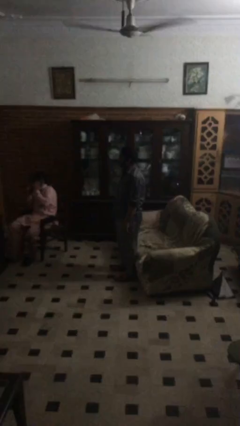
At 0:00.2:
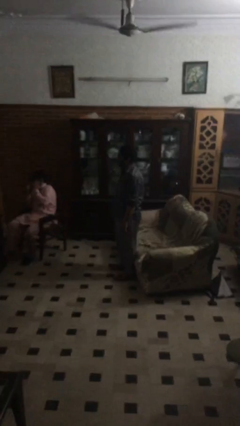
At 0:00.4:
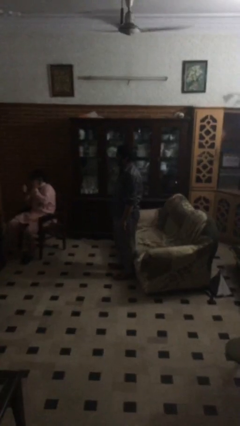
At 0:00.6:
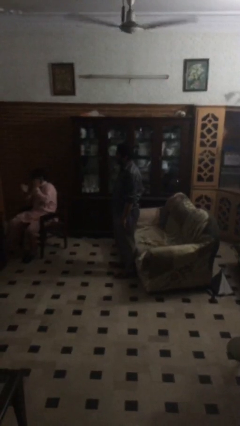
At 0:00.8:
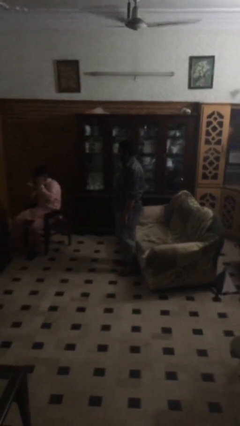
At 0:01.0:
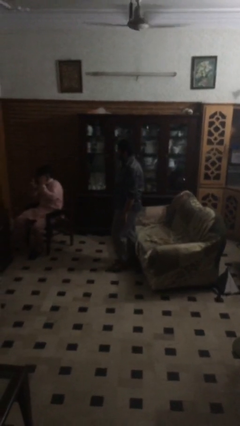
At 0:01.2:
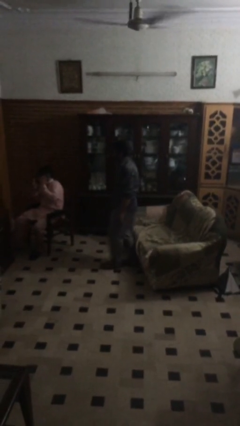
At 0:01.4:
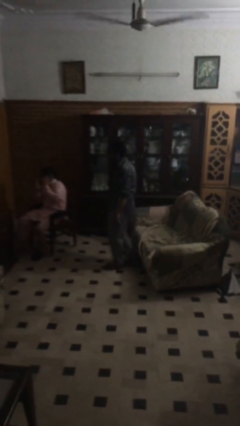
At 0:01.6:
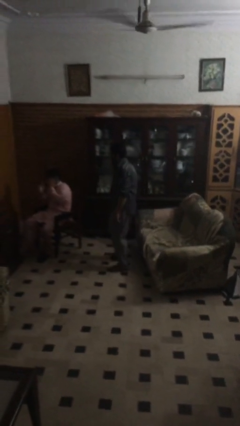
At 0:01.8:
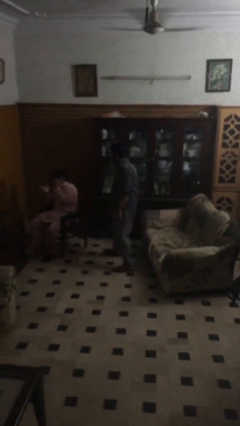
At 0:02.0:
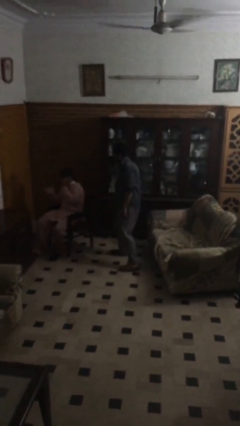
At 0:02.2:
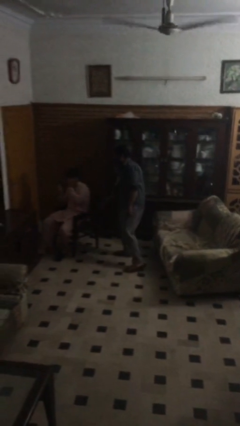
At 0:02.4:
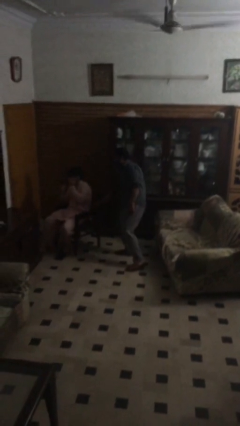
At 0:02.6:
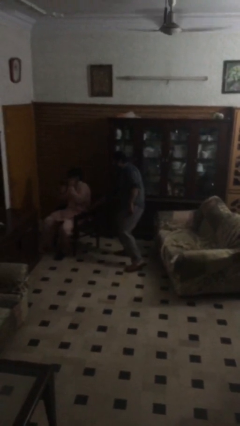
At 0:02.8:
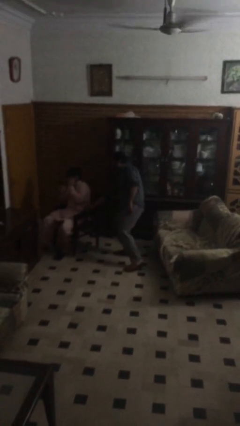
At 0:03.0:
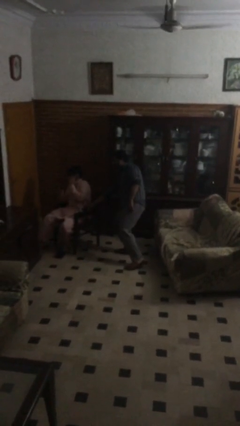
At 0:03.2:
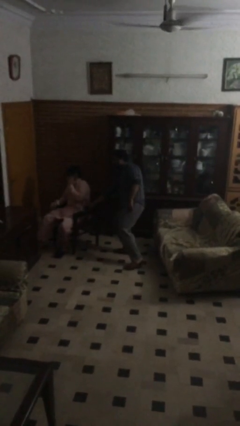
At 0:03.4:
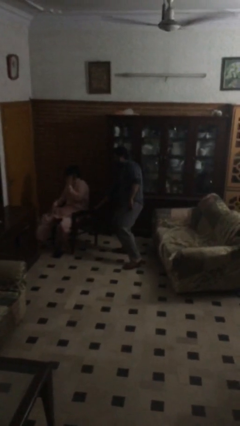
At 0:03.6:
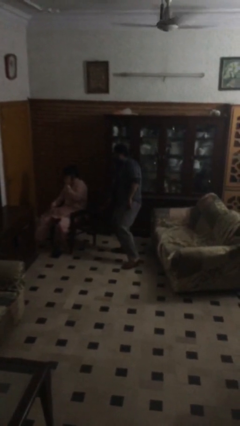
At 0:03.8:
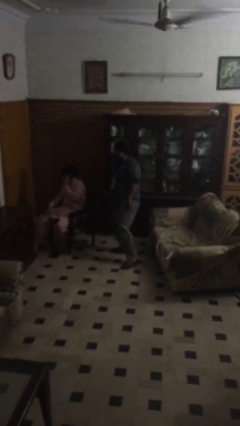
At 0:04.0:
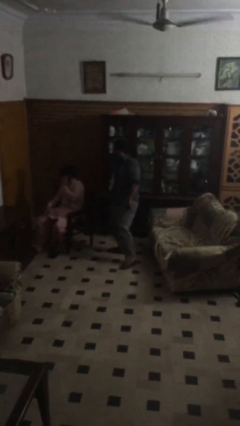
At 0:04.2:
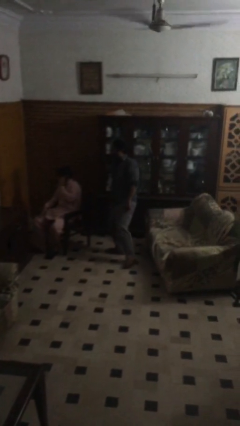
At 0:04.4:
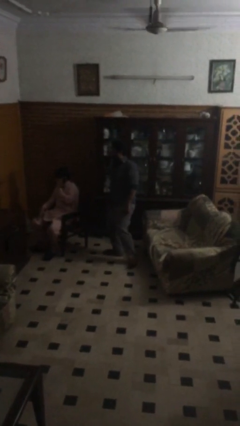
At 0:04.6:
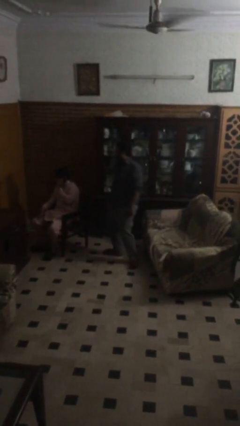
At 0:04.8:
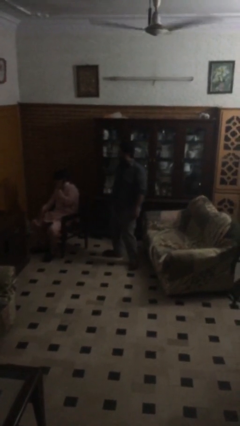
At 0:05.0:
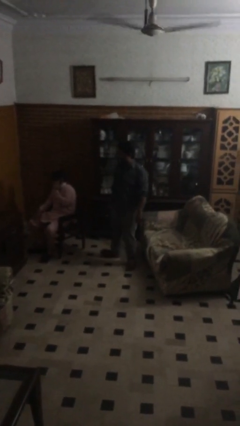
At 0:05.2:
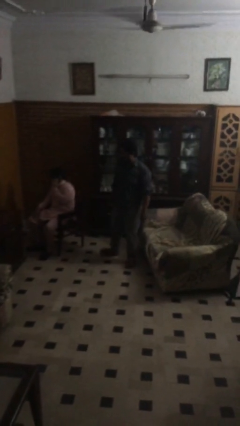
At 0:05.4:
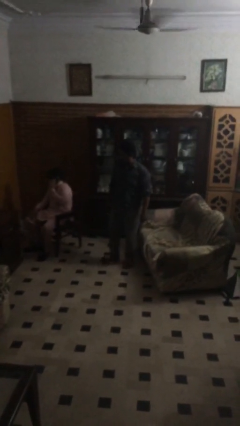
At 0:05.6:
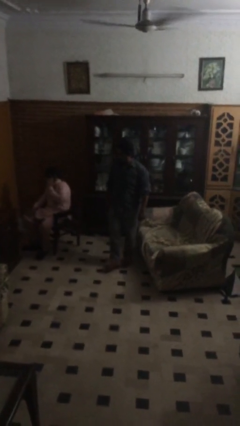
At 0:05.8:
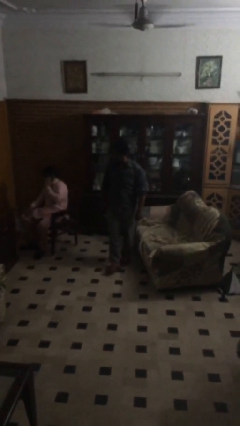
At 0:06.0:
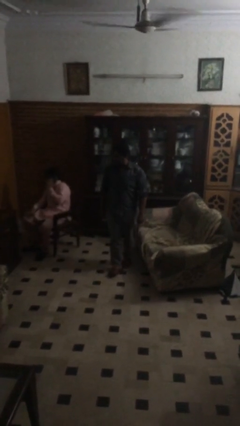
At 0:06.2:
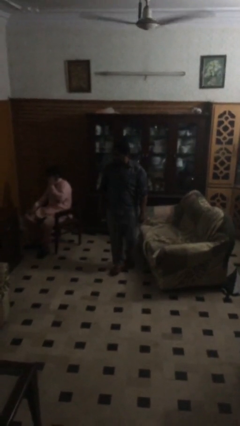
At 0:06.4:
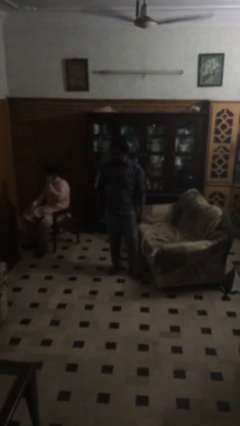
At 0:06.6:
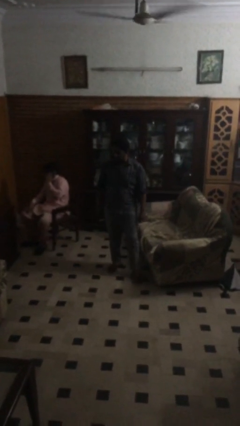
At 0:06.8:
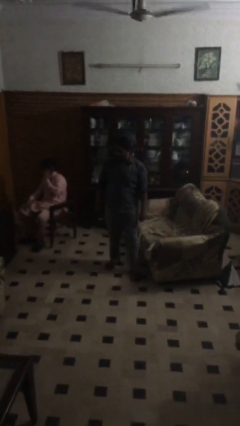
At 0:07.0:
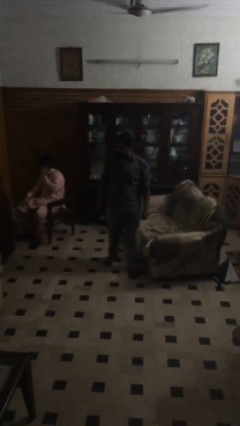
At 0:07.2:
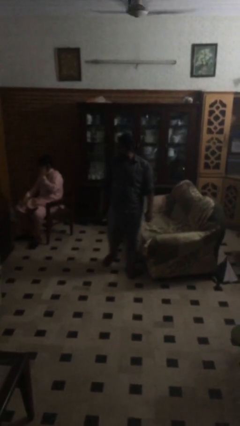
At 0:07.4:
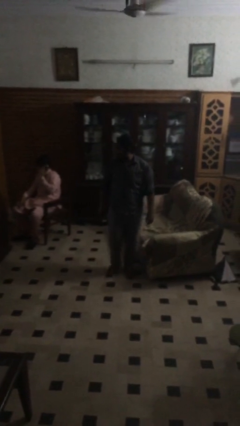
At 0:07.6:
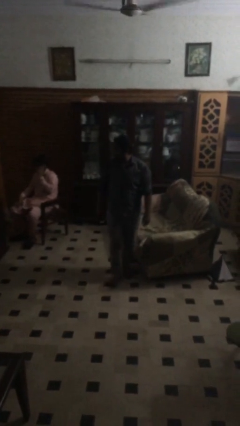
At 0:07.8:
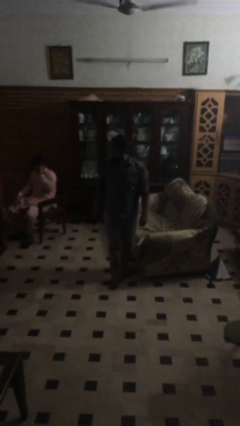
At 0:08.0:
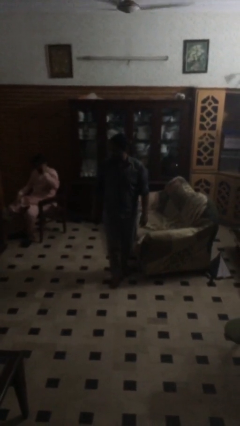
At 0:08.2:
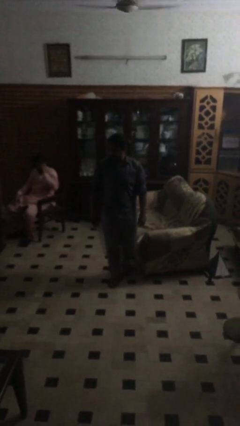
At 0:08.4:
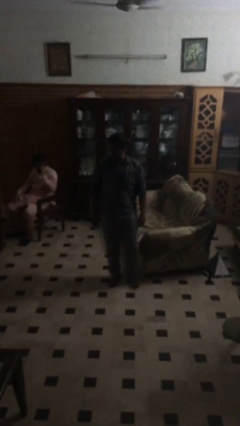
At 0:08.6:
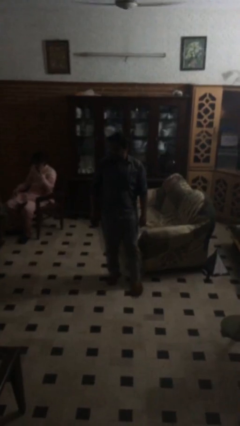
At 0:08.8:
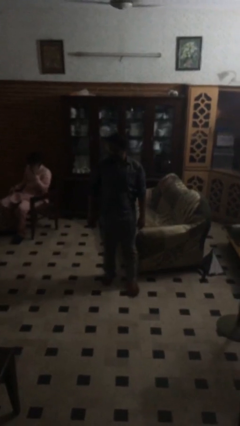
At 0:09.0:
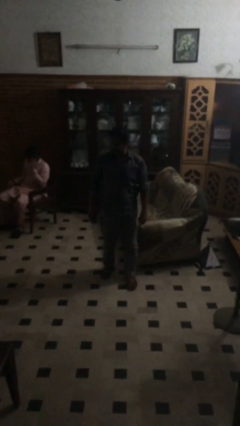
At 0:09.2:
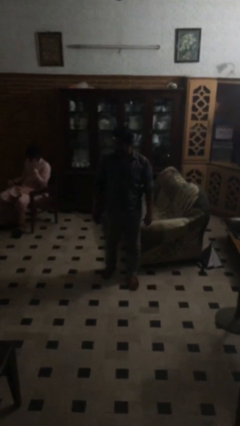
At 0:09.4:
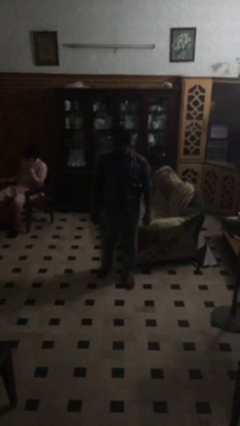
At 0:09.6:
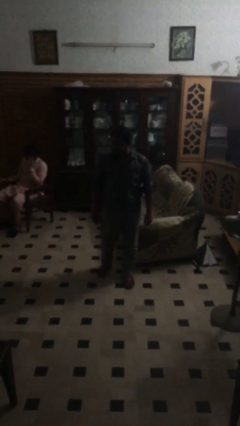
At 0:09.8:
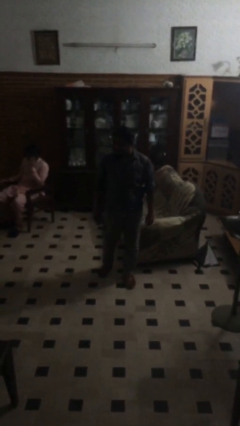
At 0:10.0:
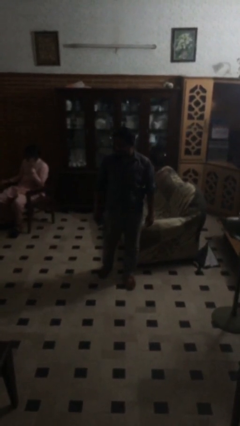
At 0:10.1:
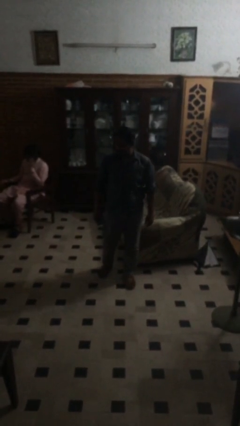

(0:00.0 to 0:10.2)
person steals object from person

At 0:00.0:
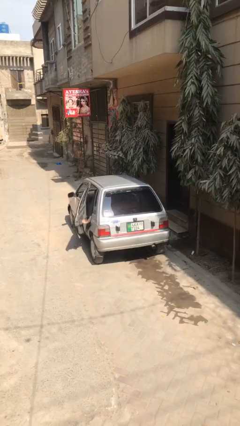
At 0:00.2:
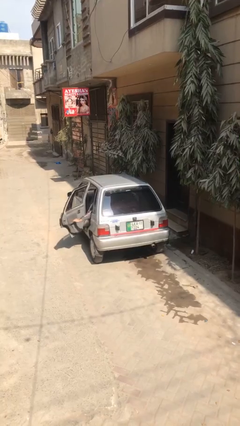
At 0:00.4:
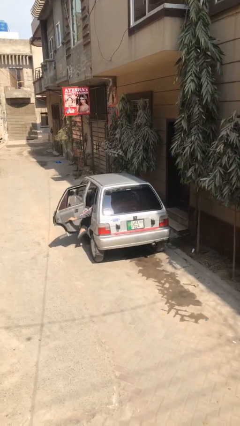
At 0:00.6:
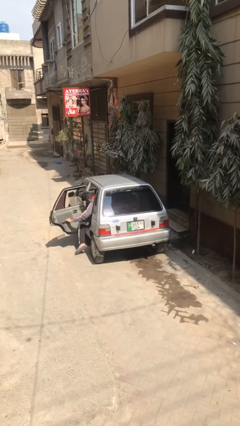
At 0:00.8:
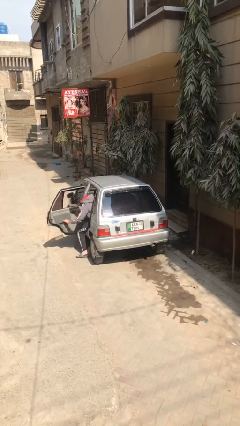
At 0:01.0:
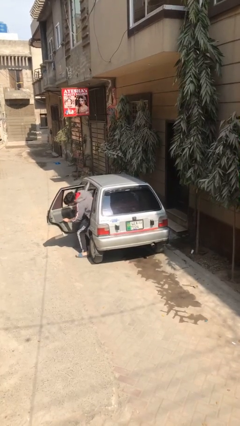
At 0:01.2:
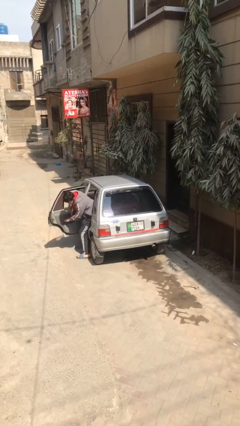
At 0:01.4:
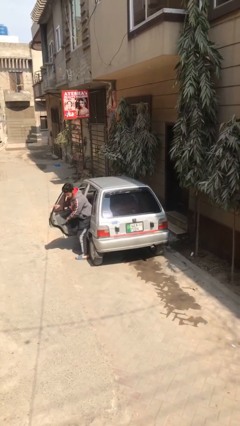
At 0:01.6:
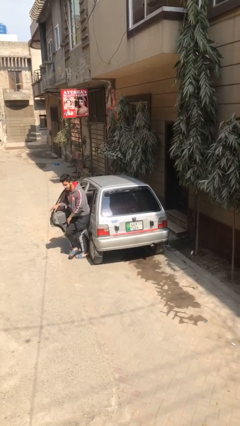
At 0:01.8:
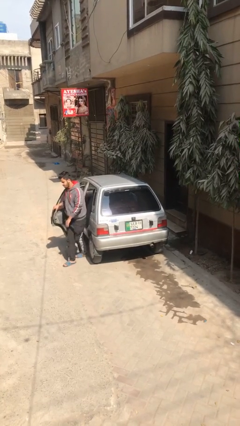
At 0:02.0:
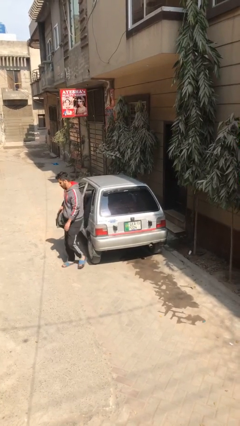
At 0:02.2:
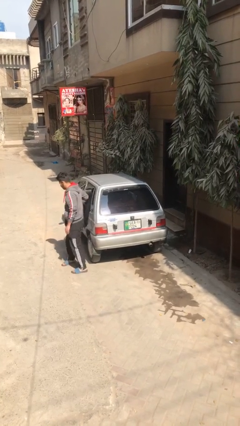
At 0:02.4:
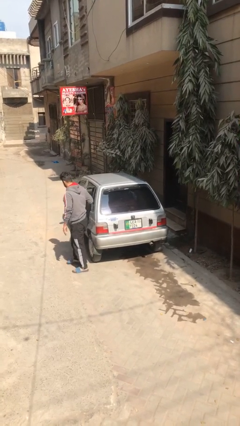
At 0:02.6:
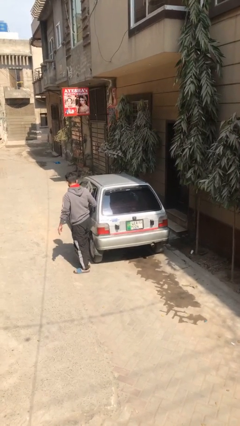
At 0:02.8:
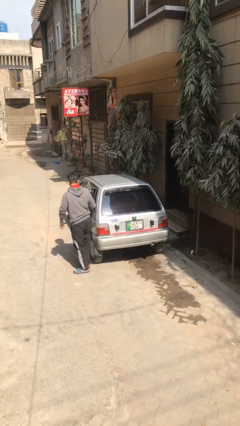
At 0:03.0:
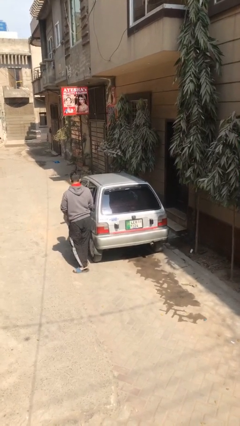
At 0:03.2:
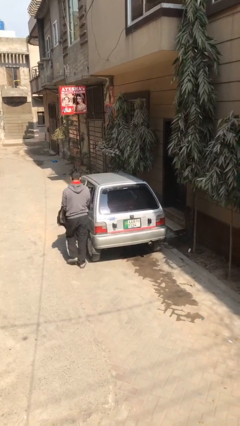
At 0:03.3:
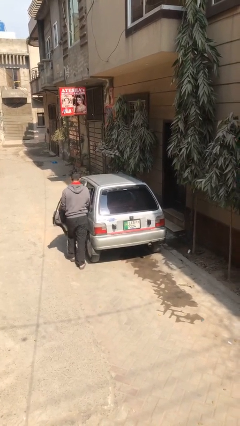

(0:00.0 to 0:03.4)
car drops off person

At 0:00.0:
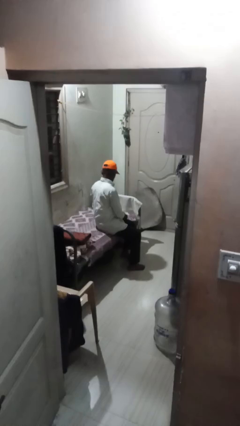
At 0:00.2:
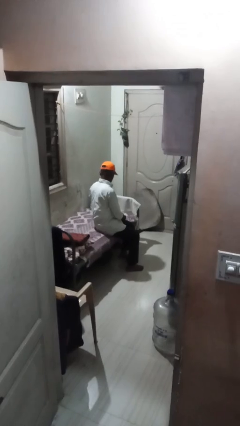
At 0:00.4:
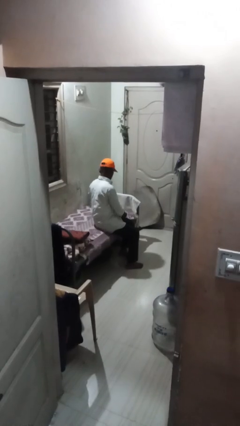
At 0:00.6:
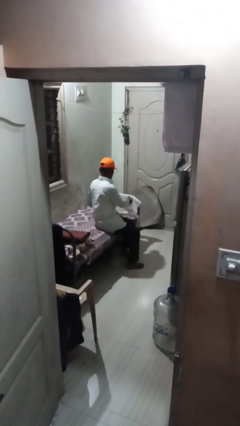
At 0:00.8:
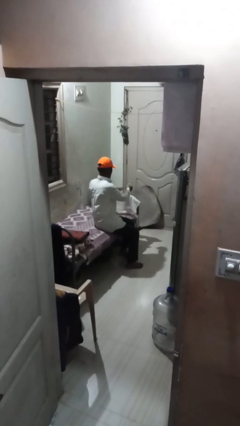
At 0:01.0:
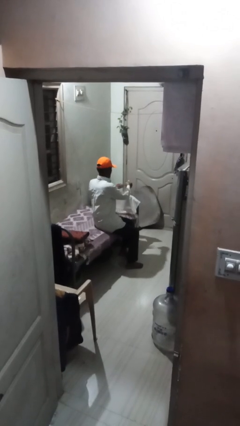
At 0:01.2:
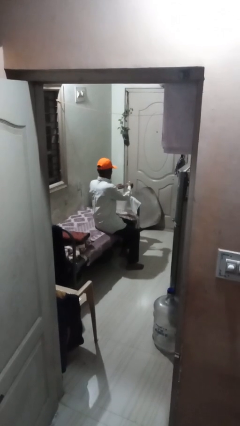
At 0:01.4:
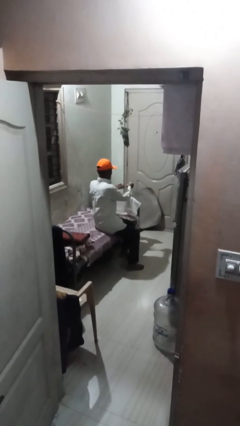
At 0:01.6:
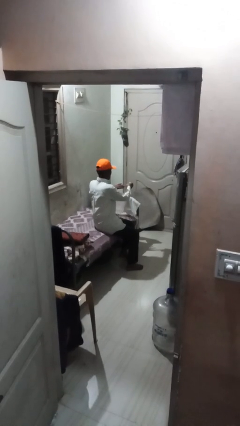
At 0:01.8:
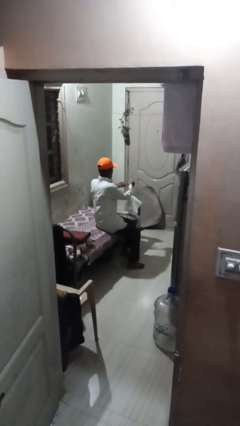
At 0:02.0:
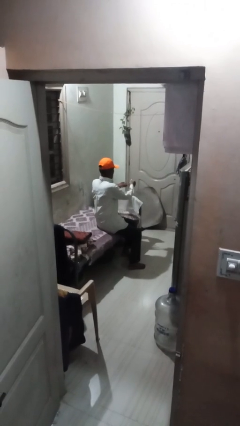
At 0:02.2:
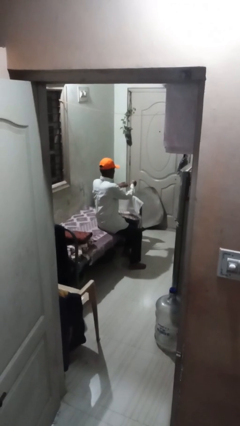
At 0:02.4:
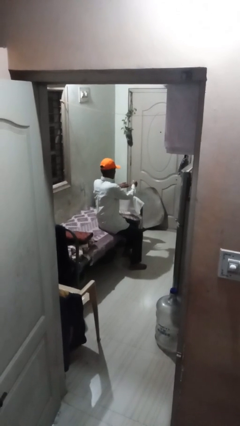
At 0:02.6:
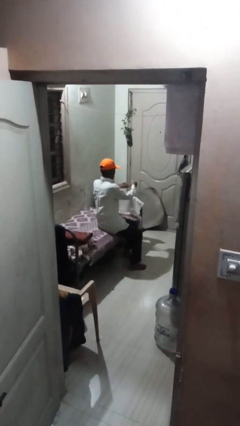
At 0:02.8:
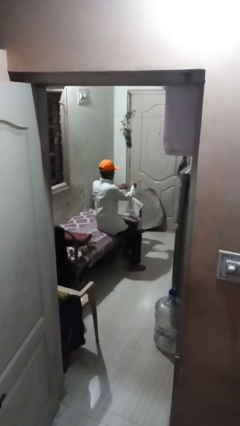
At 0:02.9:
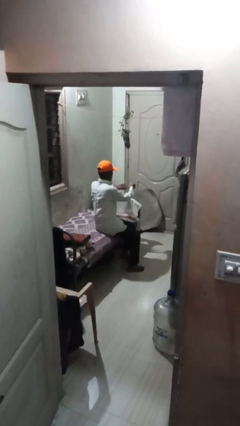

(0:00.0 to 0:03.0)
person clips fingernails

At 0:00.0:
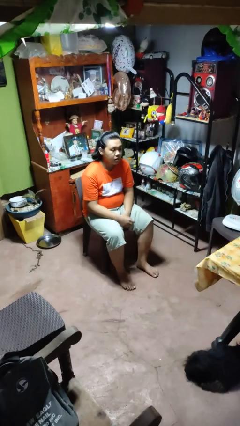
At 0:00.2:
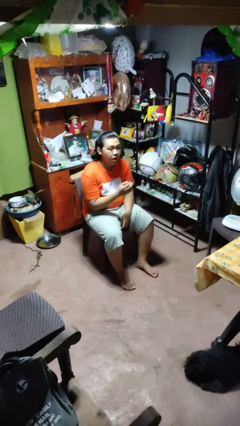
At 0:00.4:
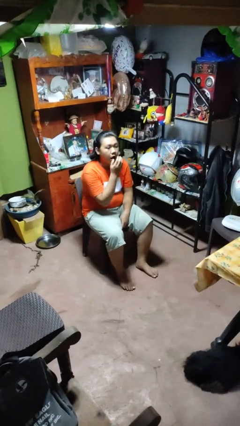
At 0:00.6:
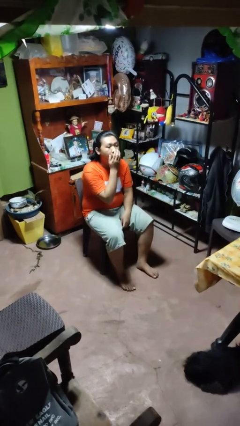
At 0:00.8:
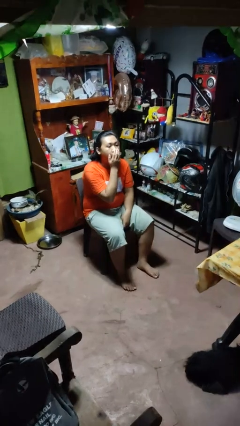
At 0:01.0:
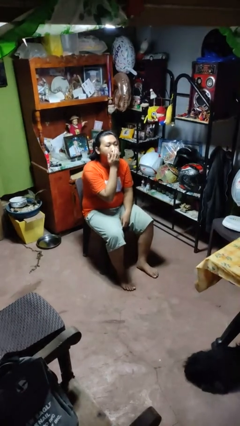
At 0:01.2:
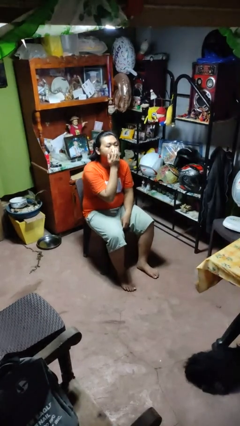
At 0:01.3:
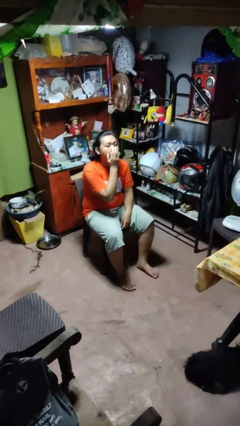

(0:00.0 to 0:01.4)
person yawns
